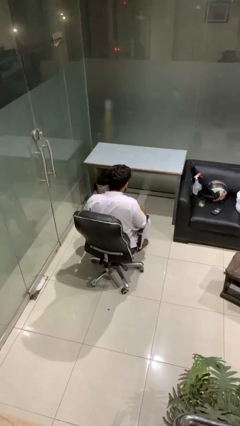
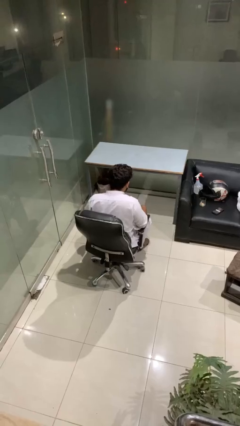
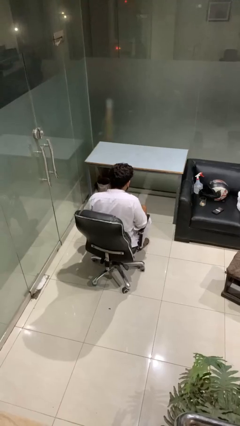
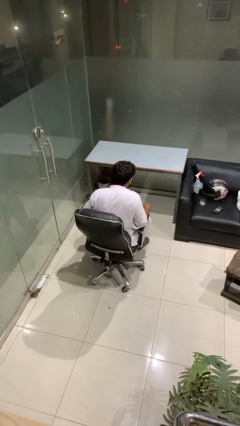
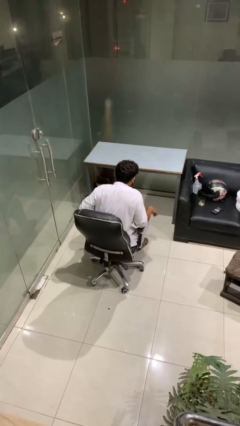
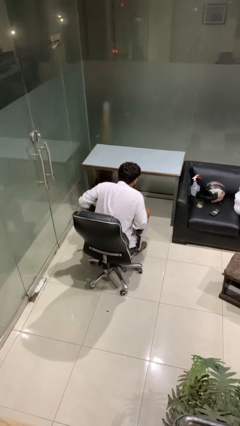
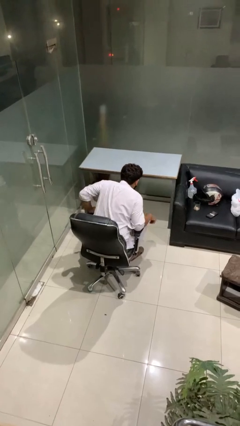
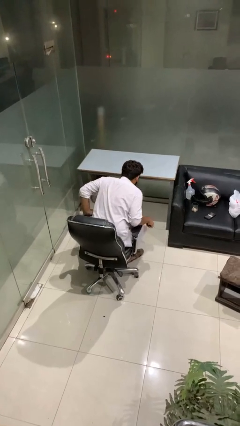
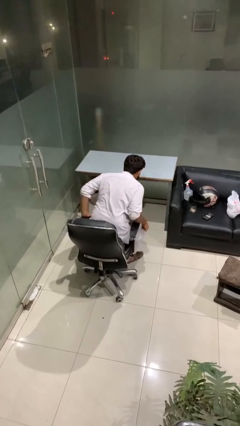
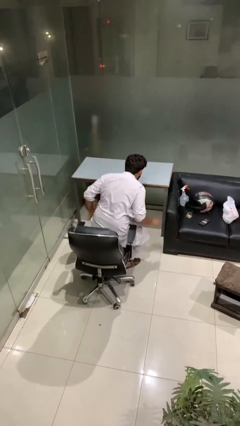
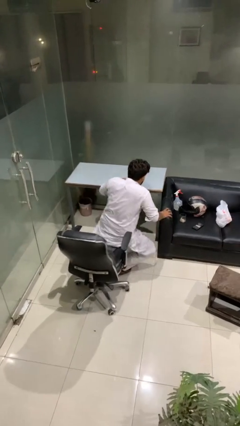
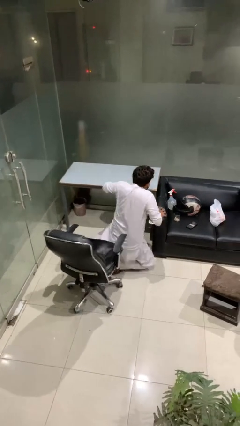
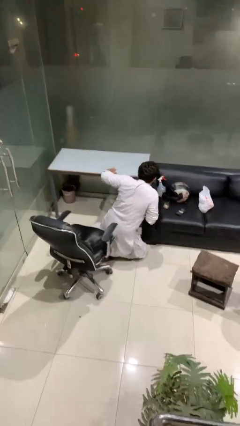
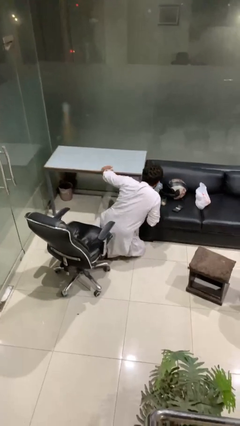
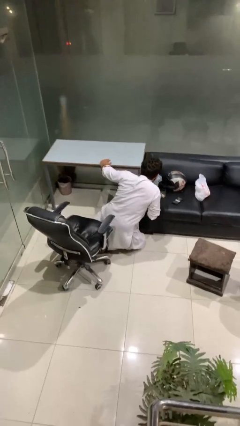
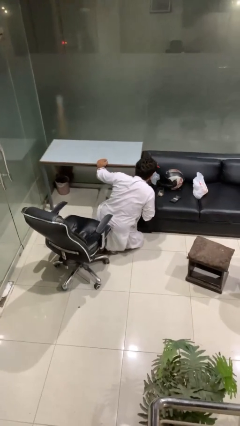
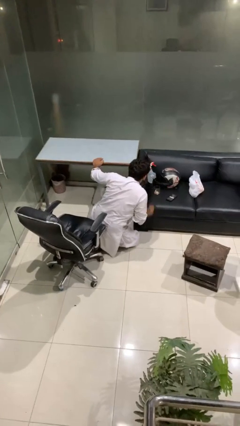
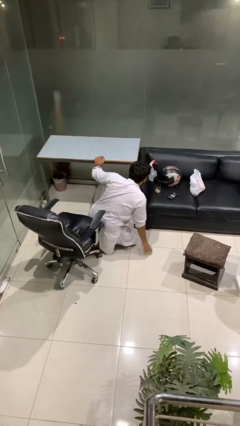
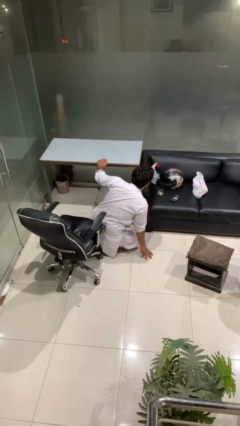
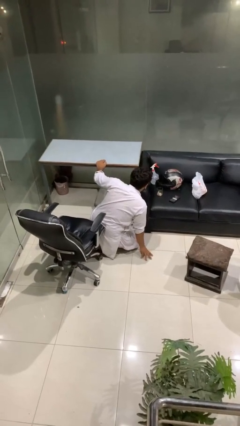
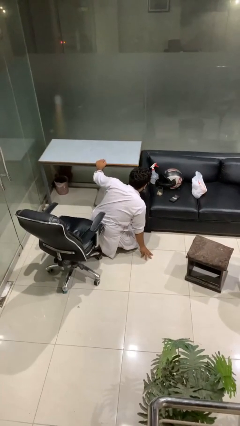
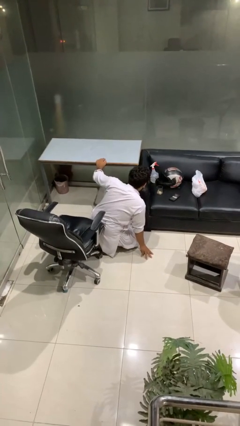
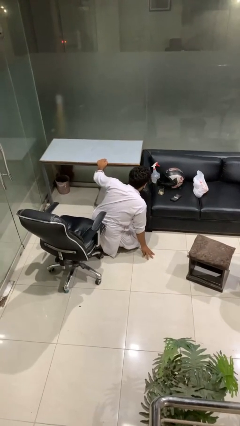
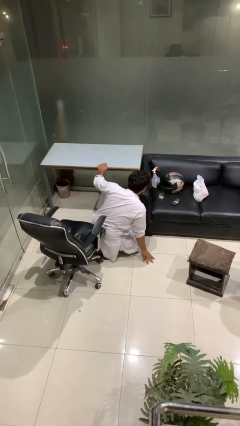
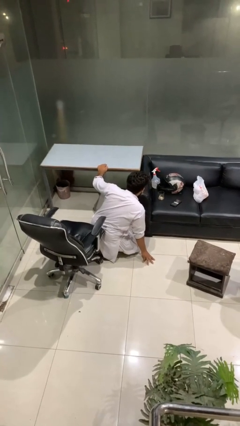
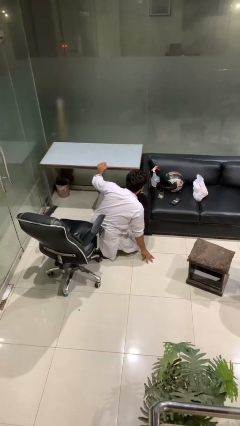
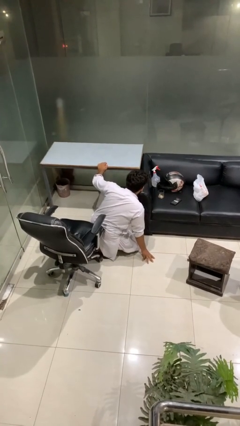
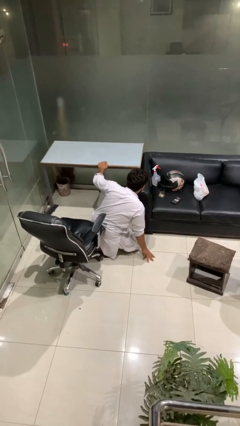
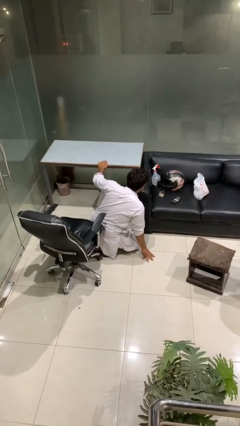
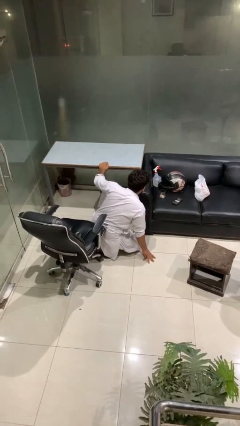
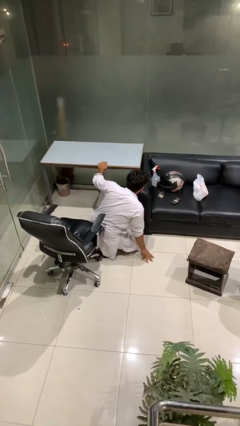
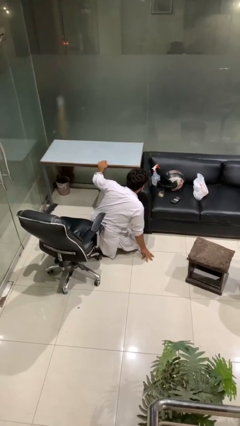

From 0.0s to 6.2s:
person falls from chair

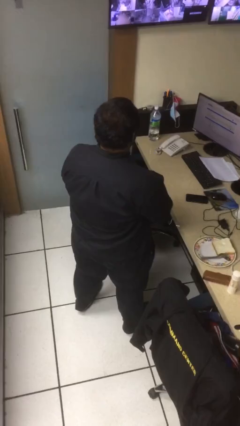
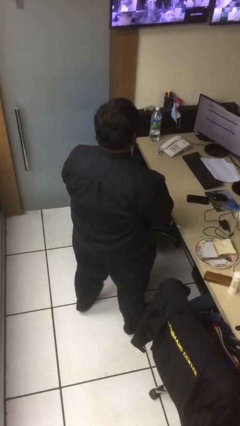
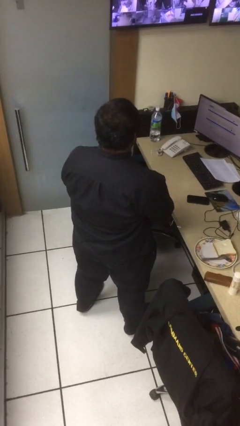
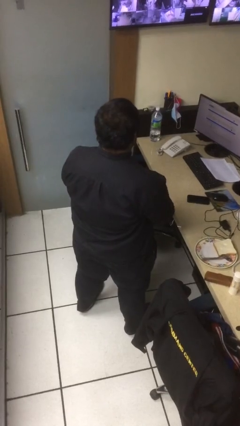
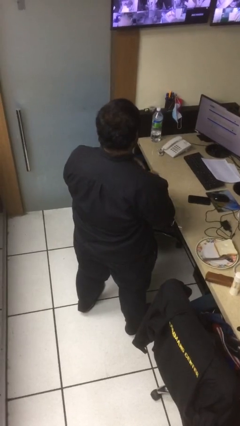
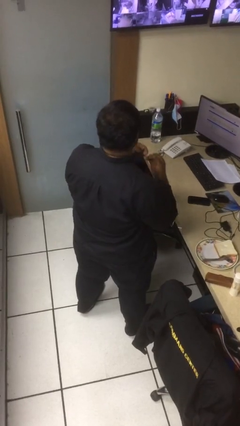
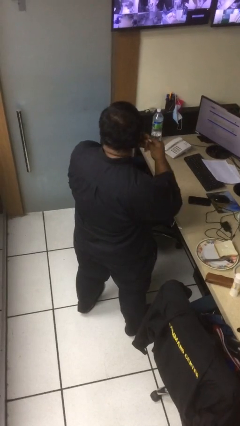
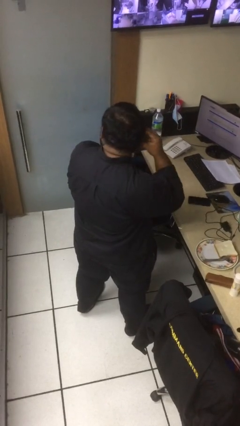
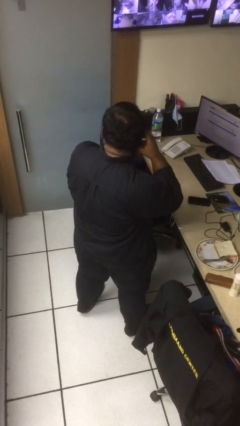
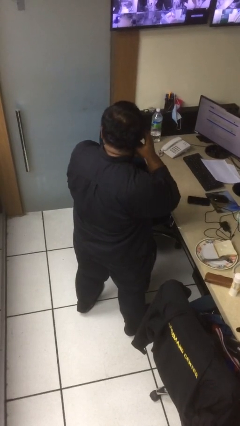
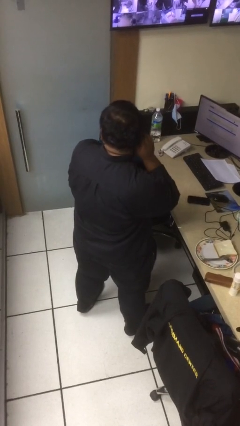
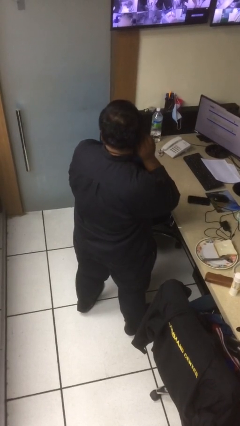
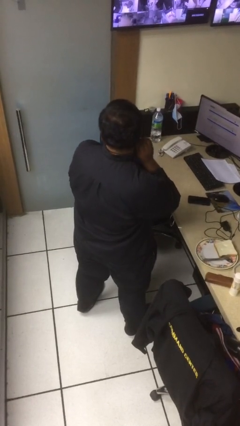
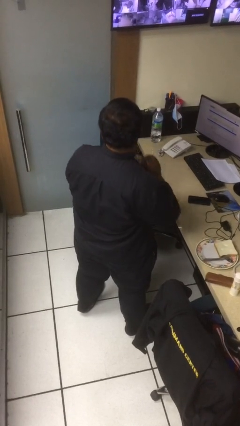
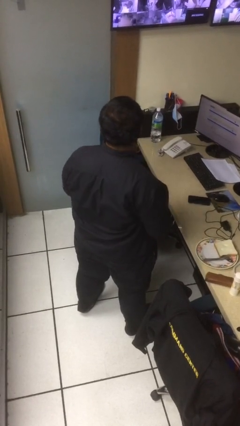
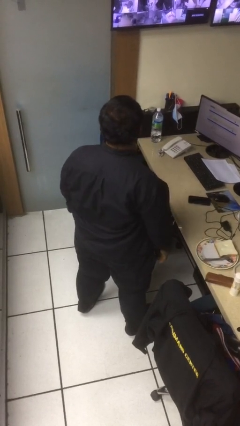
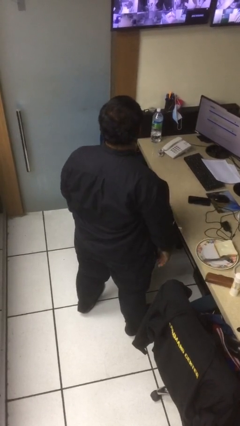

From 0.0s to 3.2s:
person puts on earrings

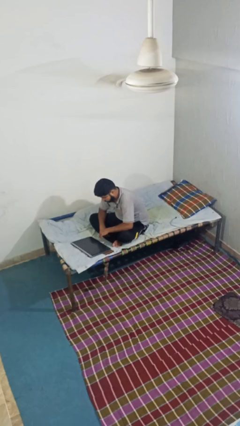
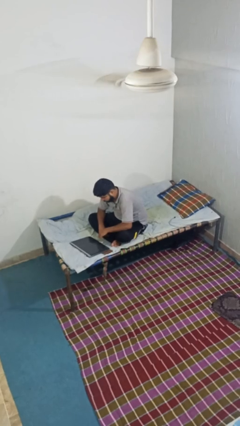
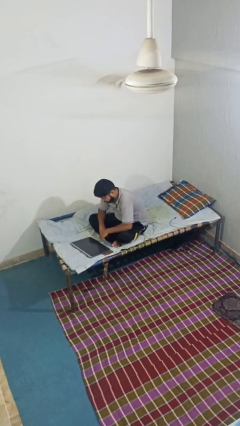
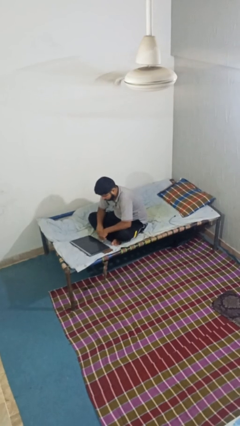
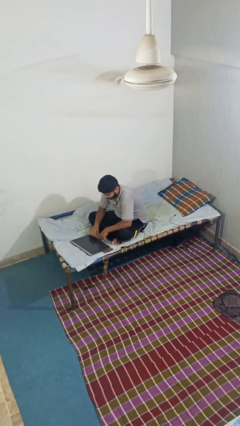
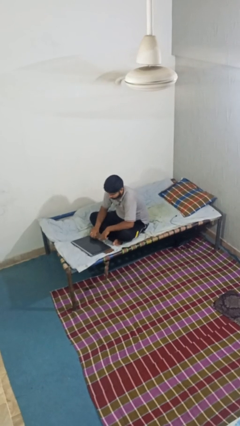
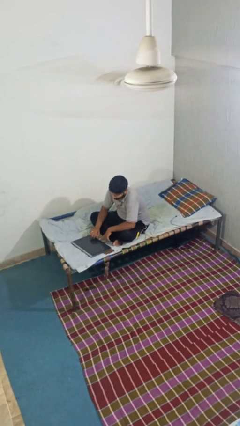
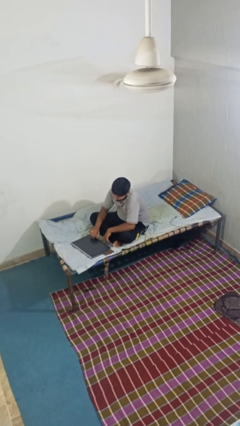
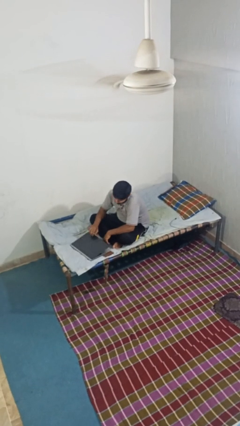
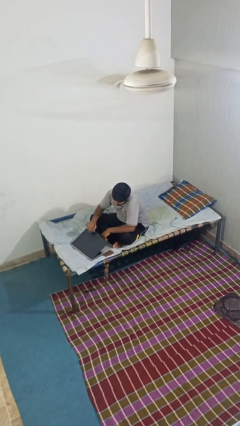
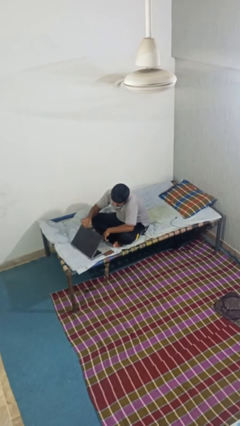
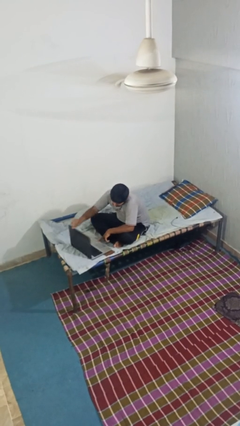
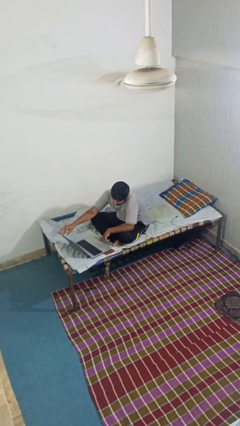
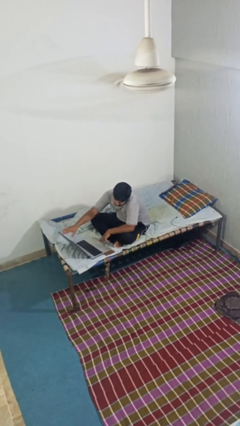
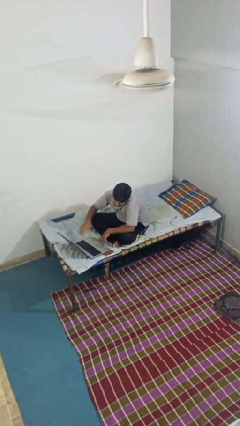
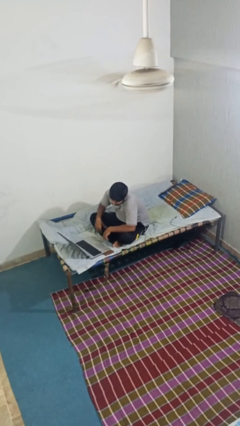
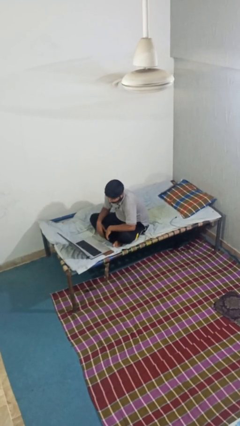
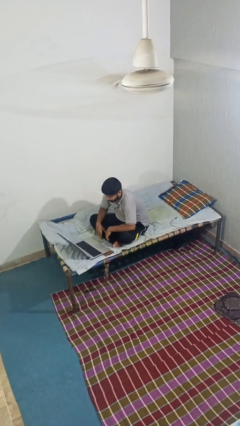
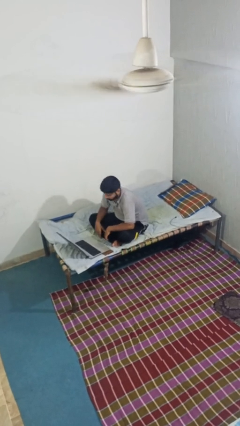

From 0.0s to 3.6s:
person opens laptop

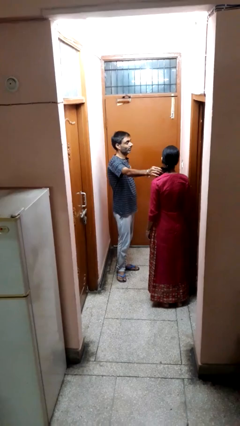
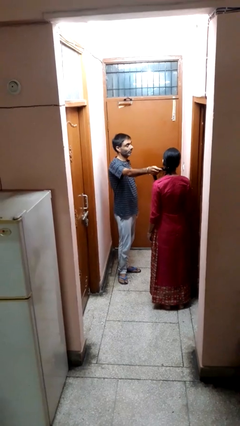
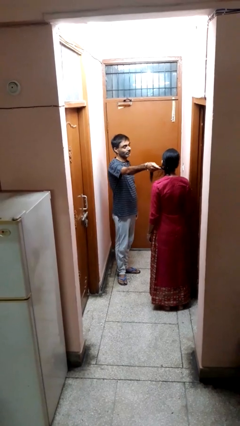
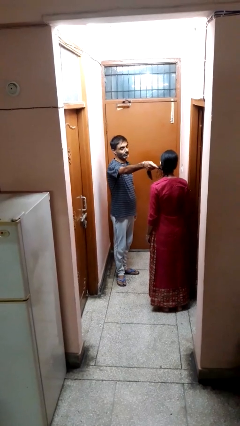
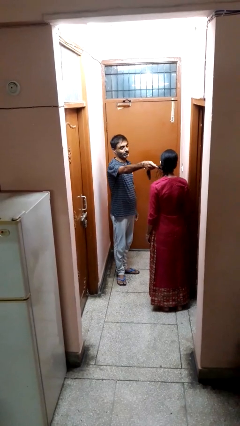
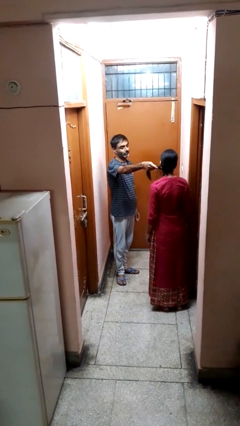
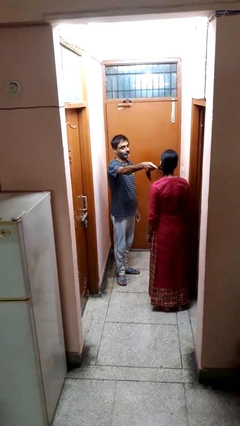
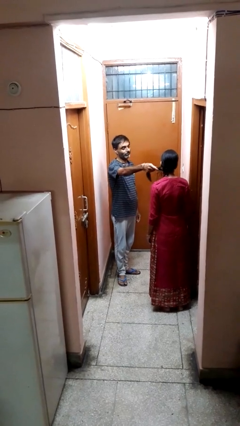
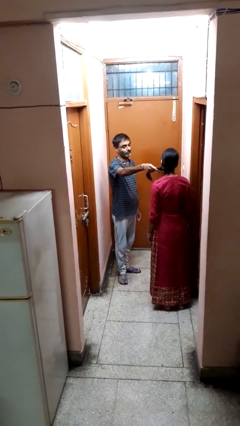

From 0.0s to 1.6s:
person grabs person by hair

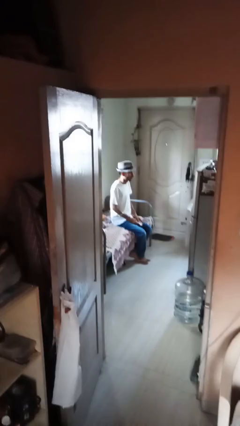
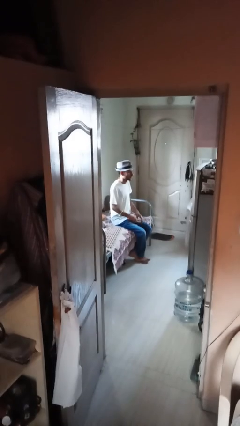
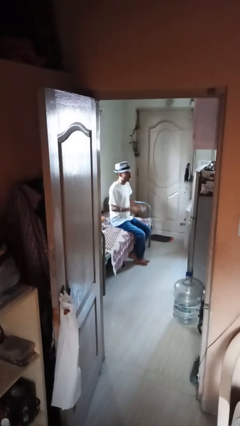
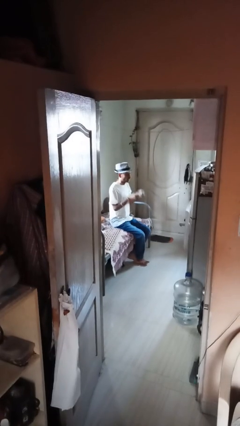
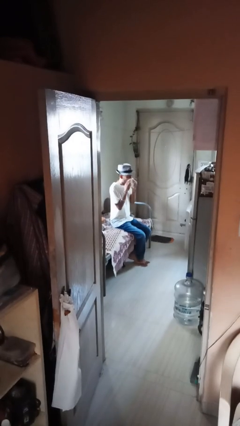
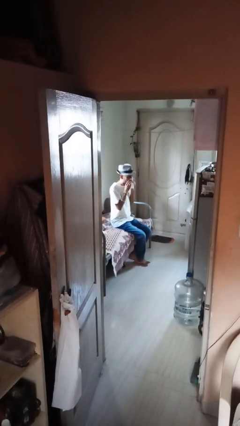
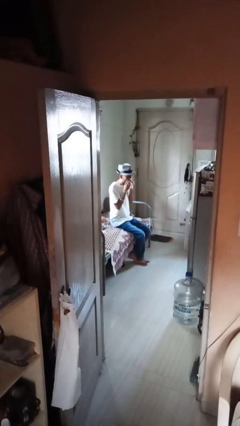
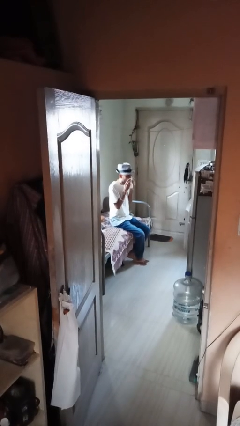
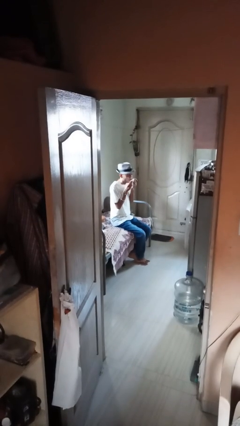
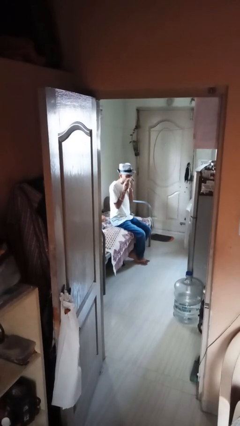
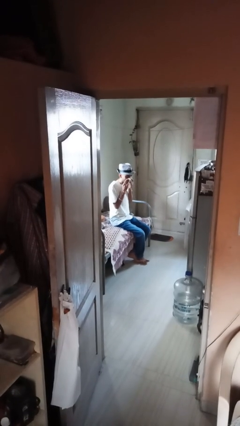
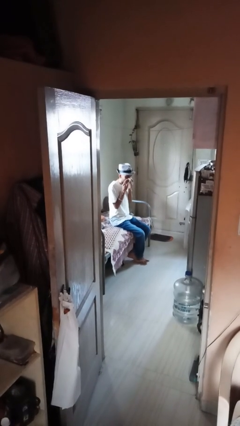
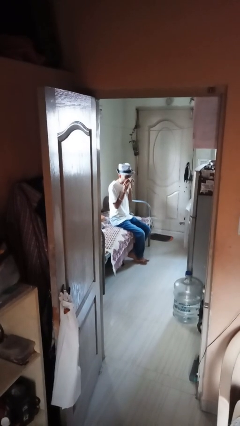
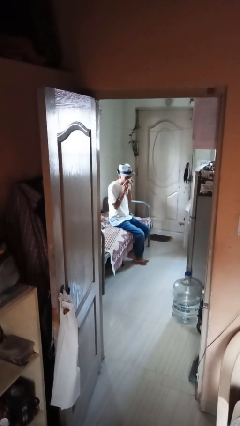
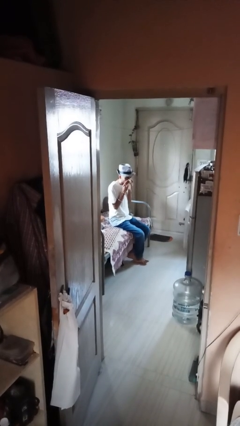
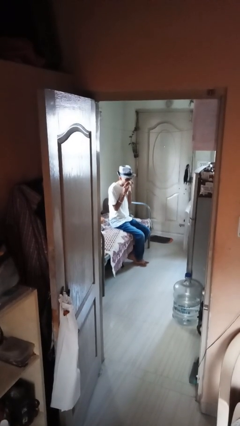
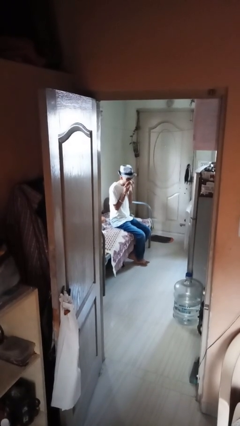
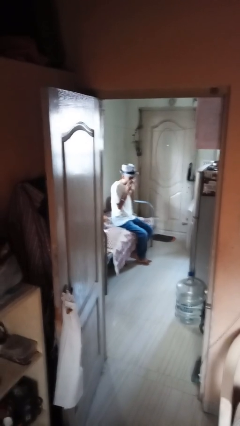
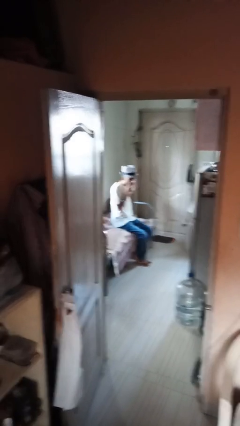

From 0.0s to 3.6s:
person blows nose
